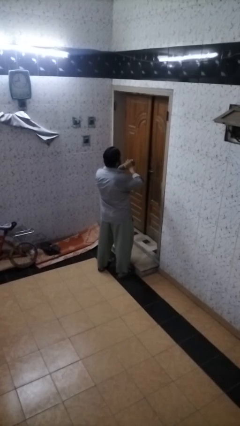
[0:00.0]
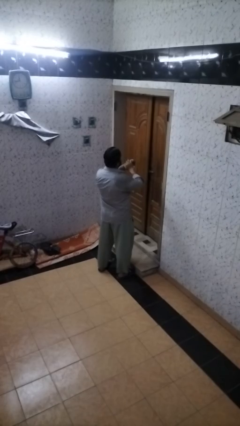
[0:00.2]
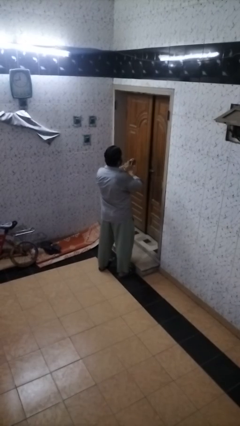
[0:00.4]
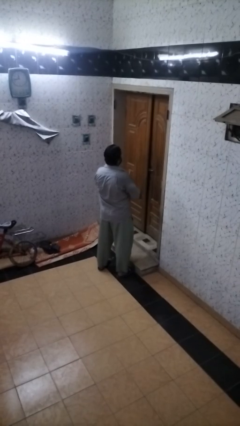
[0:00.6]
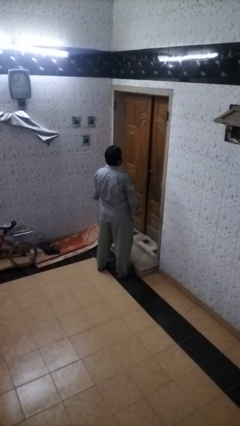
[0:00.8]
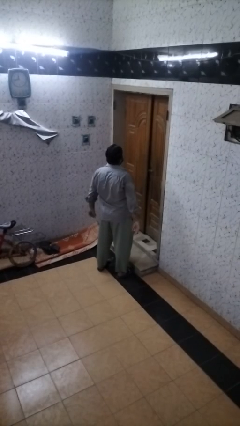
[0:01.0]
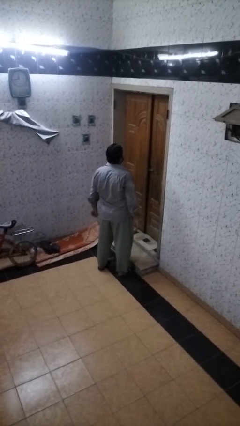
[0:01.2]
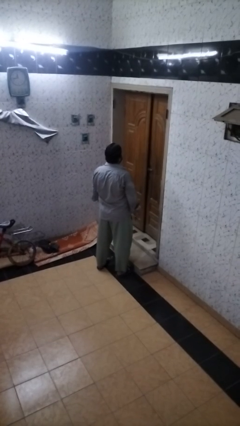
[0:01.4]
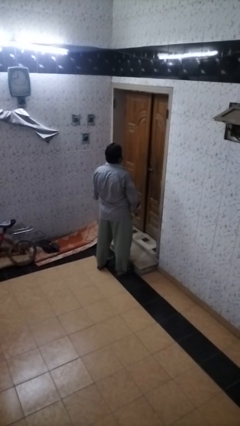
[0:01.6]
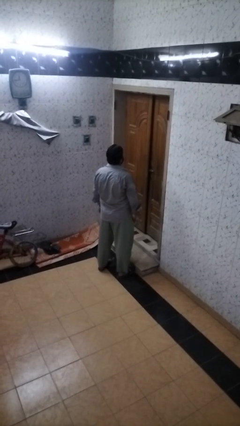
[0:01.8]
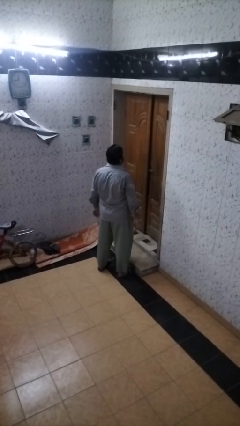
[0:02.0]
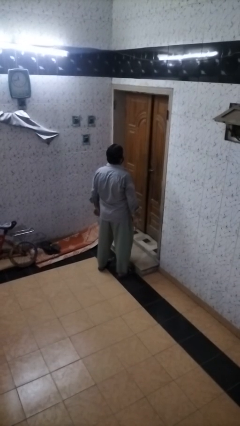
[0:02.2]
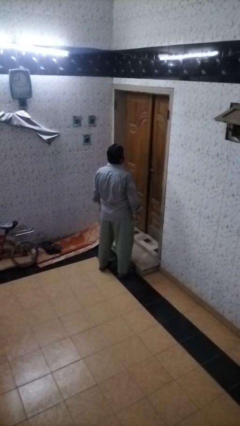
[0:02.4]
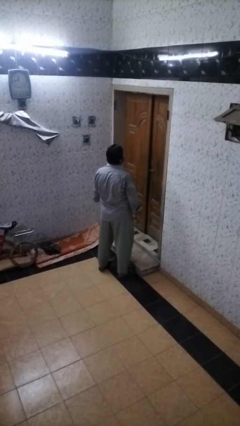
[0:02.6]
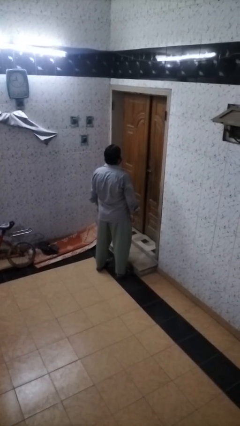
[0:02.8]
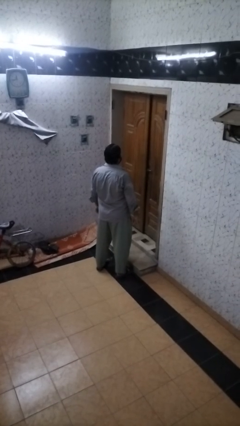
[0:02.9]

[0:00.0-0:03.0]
person takes off ring

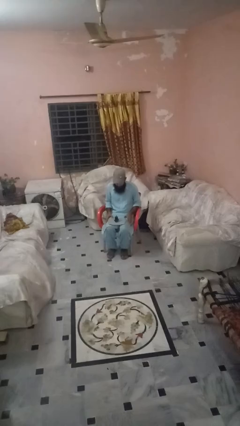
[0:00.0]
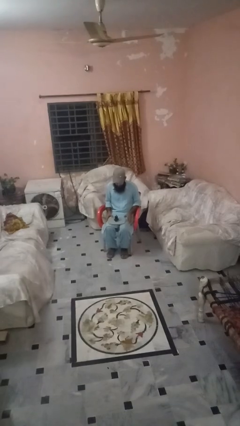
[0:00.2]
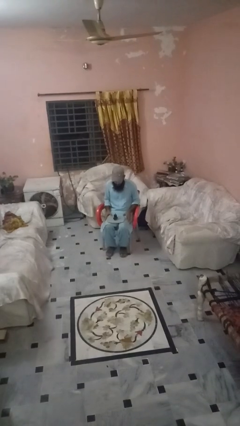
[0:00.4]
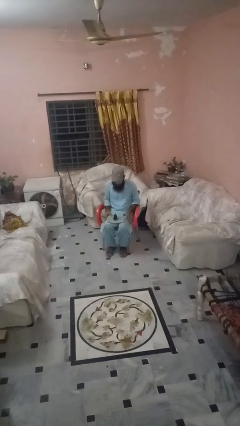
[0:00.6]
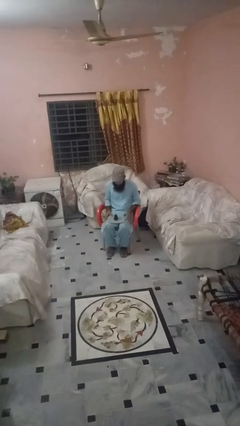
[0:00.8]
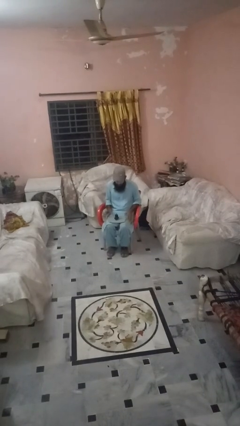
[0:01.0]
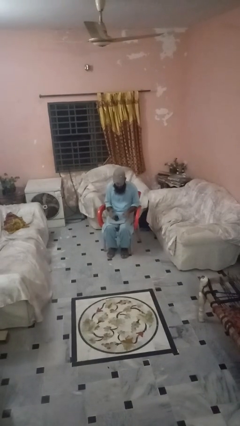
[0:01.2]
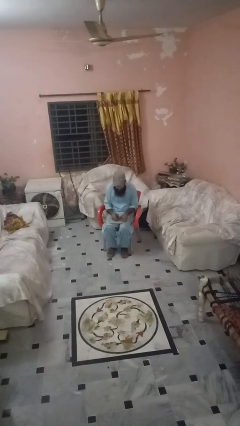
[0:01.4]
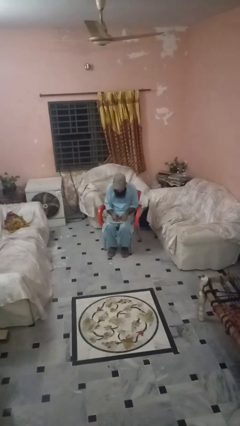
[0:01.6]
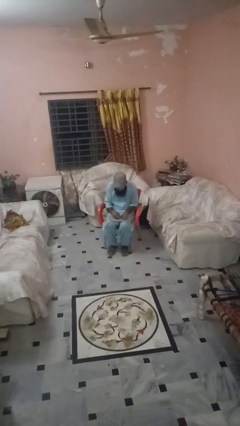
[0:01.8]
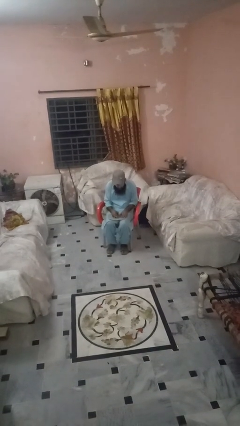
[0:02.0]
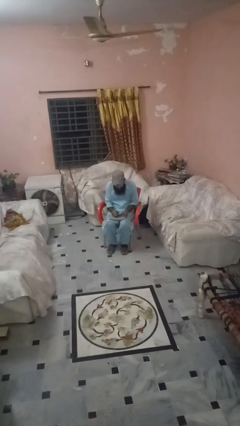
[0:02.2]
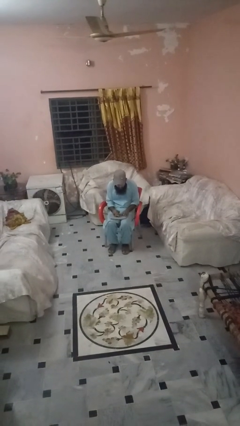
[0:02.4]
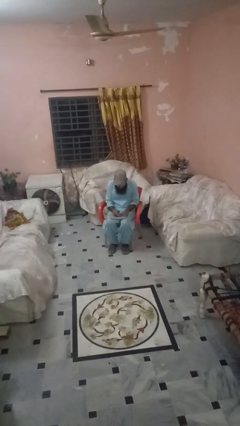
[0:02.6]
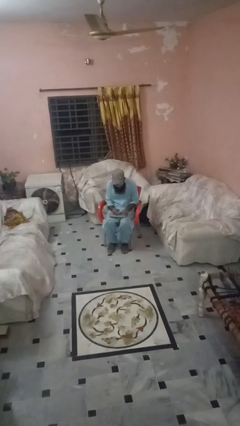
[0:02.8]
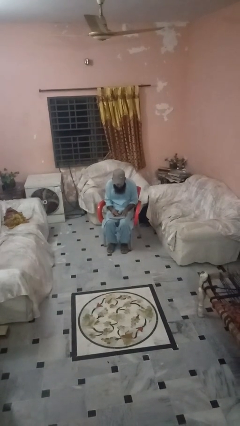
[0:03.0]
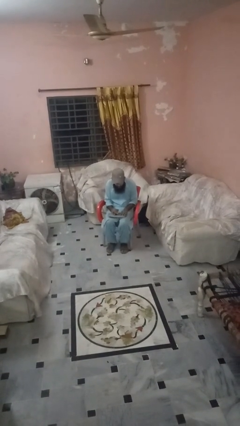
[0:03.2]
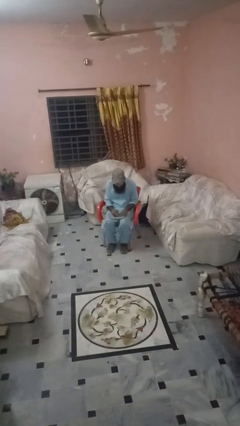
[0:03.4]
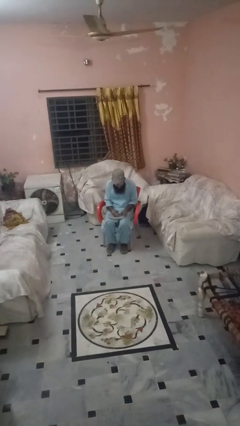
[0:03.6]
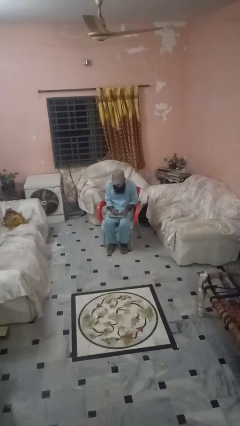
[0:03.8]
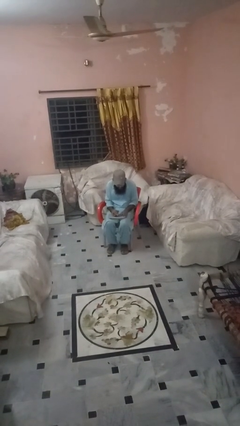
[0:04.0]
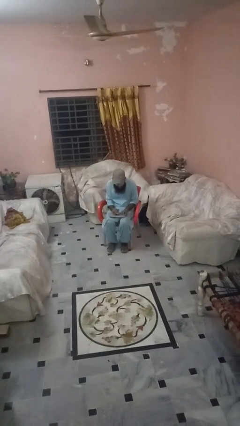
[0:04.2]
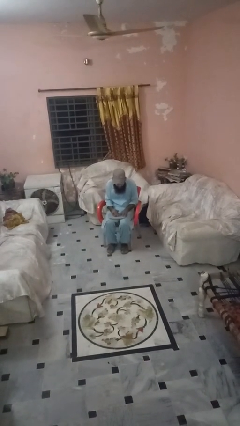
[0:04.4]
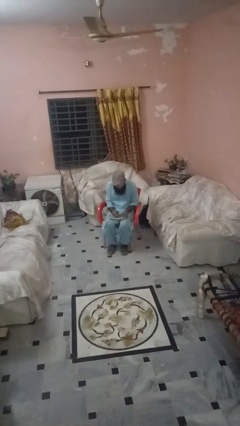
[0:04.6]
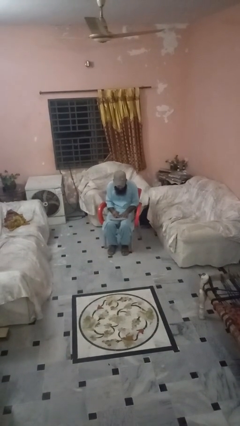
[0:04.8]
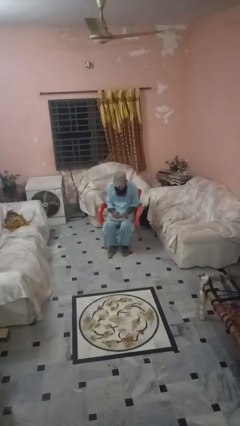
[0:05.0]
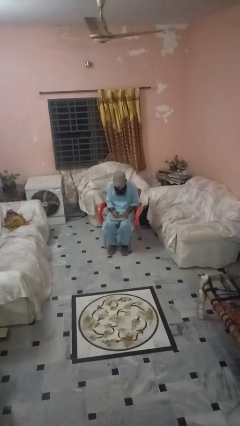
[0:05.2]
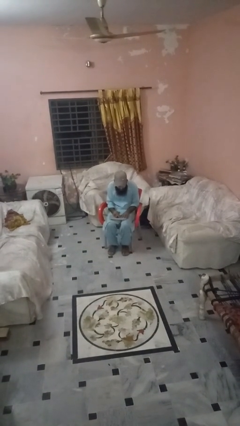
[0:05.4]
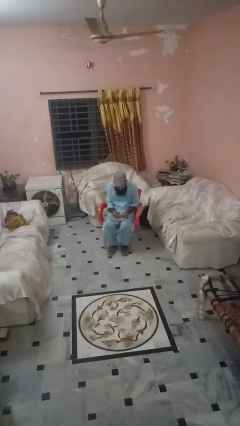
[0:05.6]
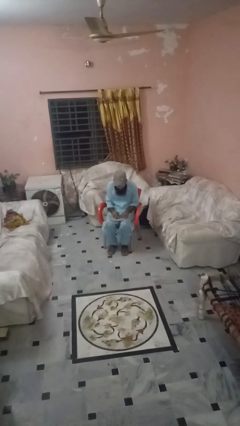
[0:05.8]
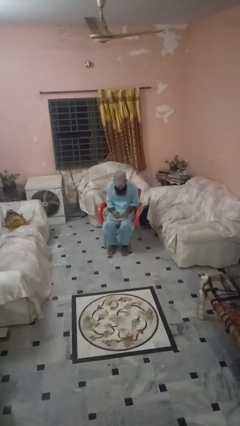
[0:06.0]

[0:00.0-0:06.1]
person interacts with handheld game

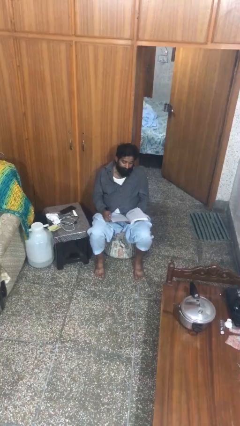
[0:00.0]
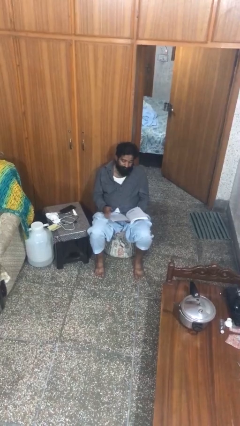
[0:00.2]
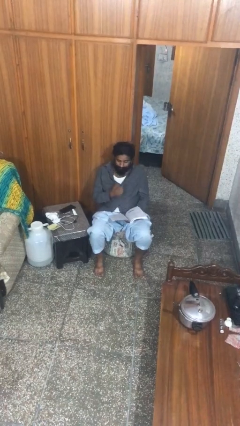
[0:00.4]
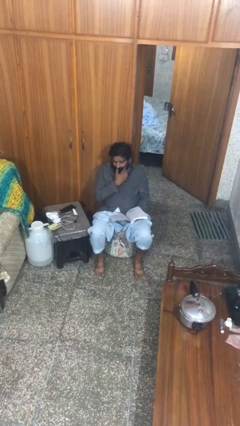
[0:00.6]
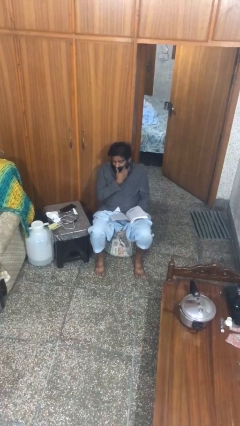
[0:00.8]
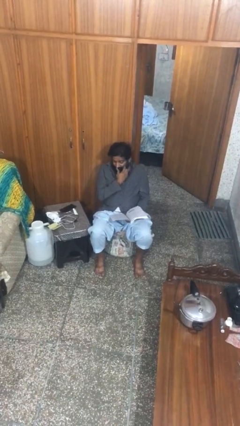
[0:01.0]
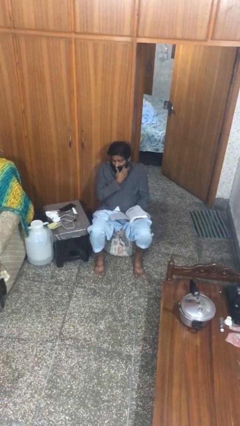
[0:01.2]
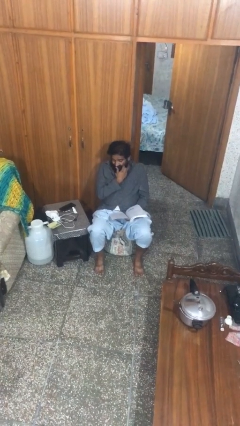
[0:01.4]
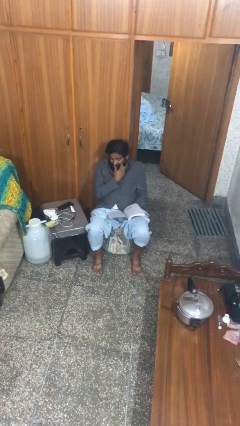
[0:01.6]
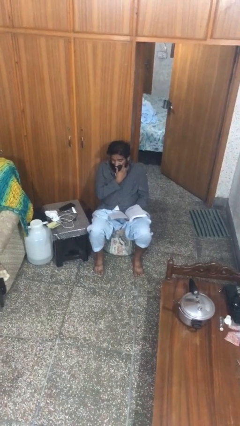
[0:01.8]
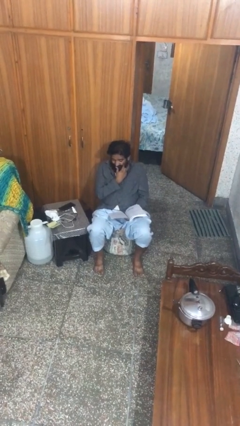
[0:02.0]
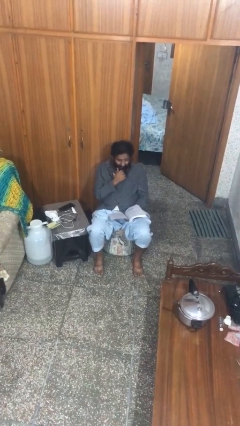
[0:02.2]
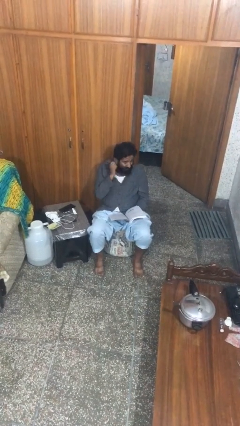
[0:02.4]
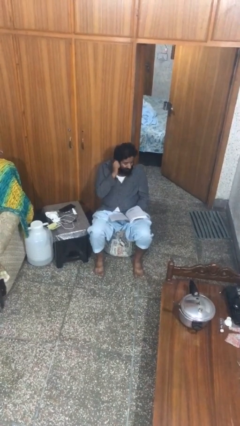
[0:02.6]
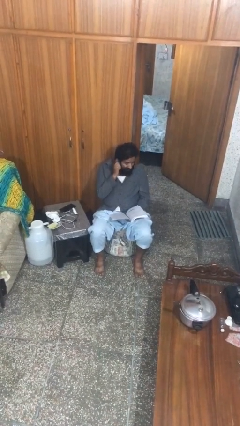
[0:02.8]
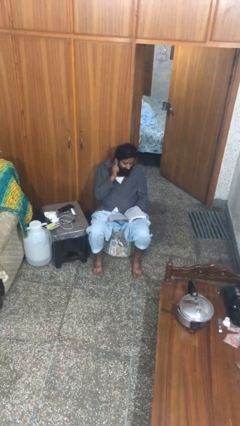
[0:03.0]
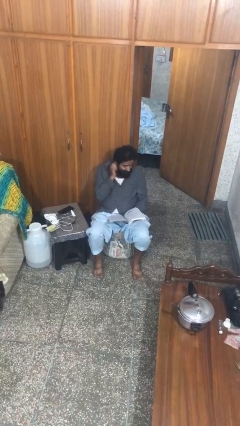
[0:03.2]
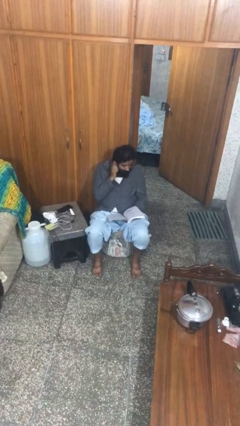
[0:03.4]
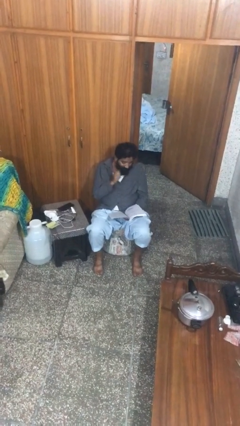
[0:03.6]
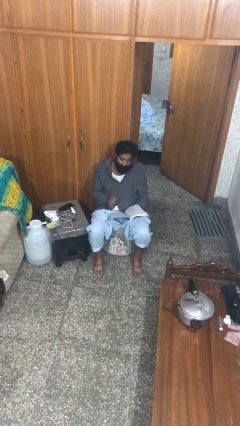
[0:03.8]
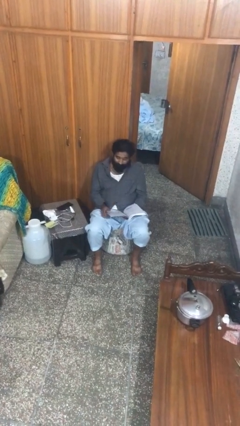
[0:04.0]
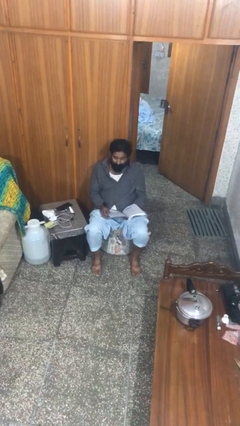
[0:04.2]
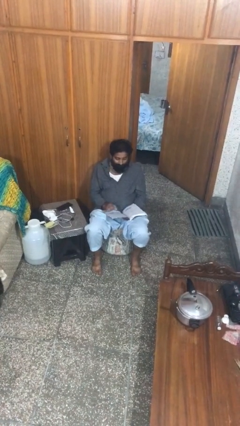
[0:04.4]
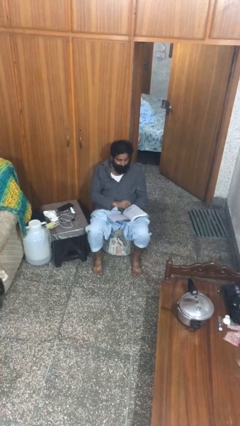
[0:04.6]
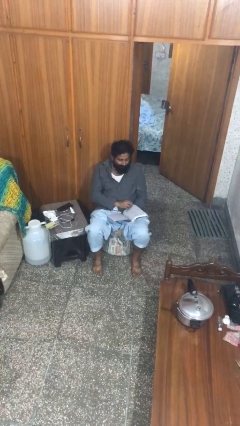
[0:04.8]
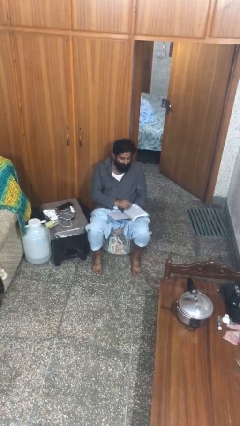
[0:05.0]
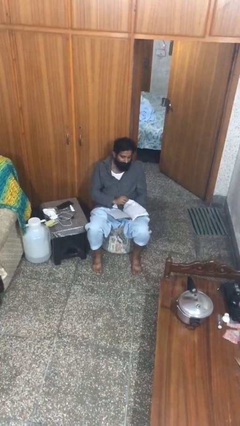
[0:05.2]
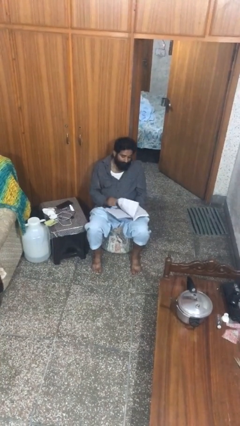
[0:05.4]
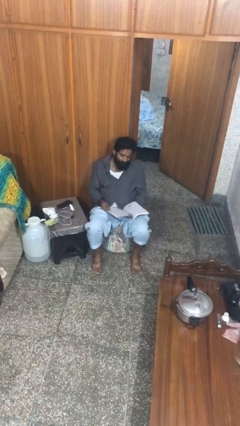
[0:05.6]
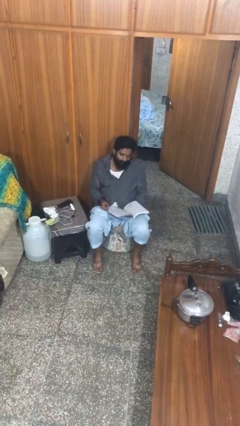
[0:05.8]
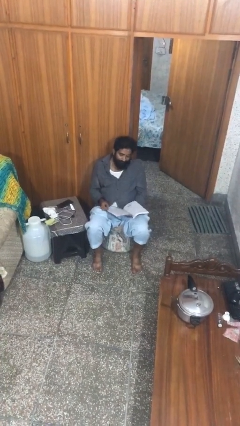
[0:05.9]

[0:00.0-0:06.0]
person reads document

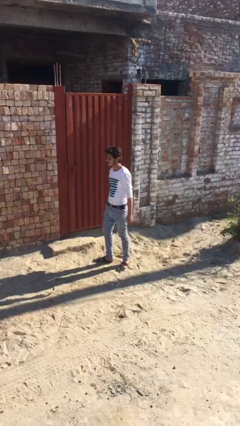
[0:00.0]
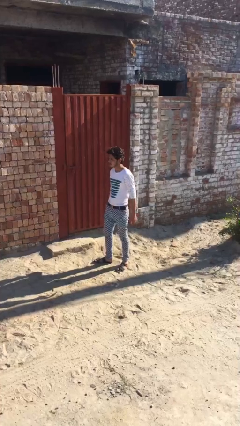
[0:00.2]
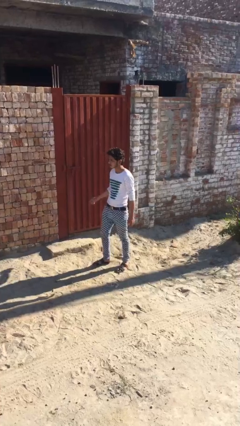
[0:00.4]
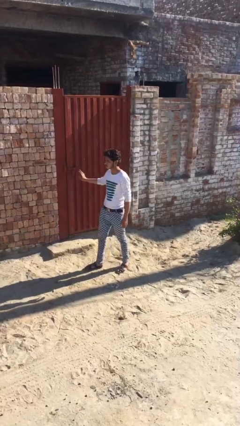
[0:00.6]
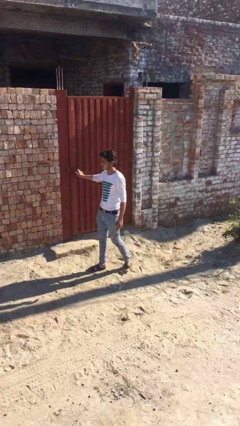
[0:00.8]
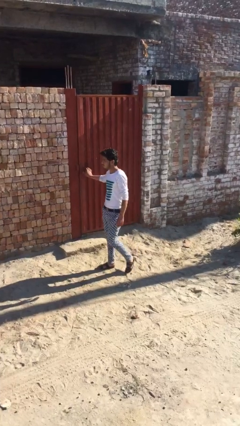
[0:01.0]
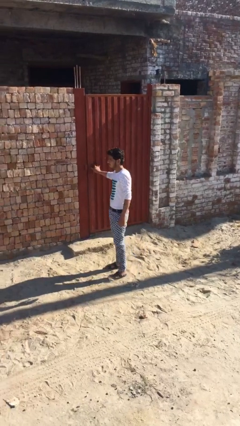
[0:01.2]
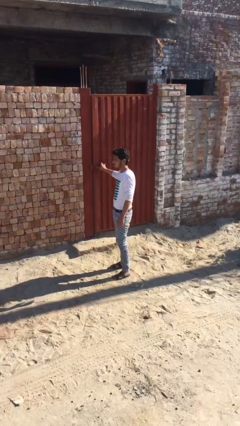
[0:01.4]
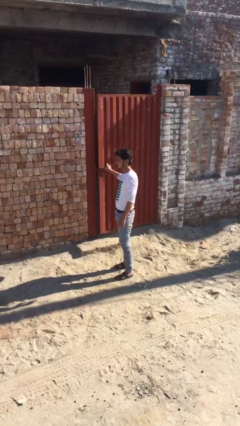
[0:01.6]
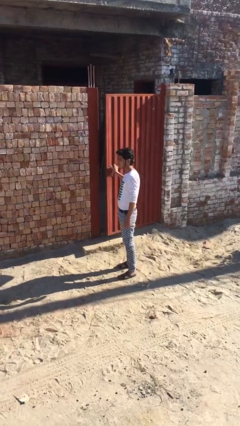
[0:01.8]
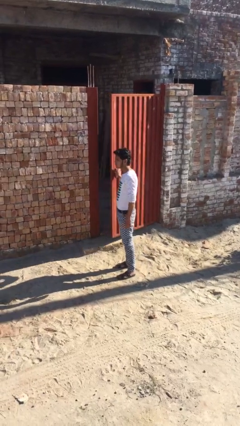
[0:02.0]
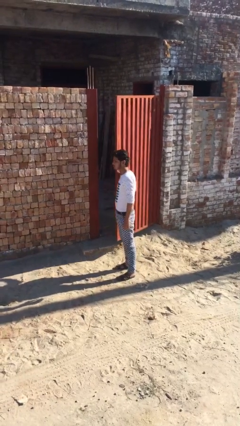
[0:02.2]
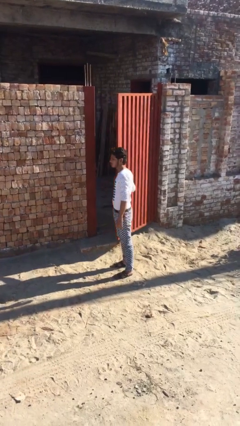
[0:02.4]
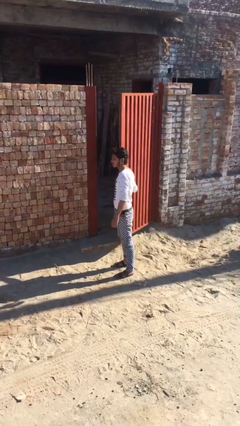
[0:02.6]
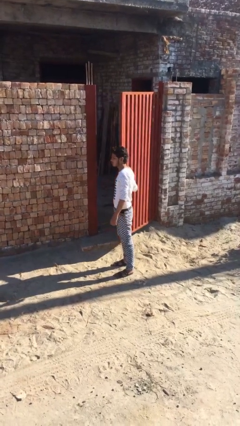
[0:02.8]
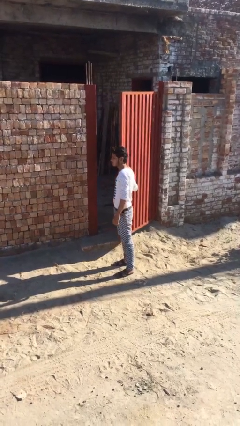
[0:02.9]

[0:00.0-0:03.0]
person opens facility door

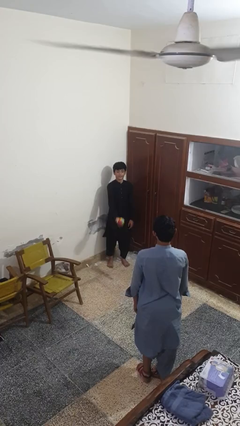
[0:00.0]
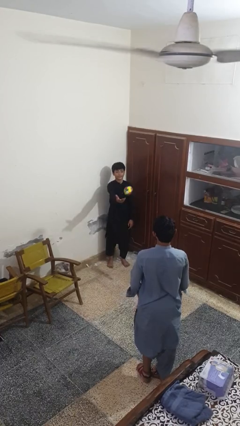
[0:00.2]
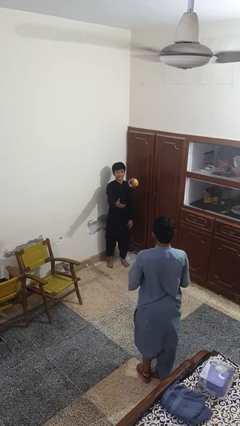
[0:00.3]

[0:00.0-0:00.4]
person throws object to person
